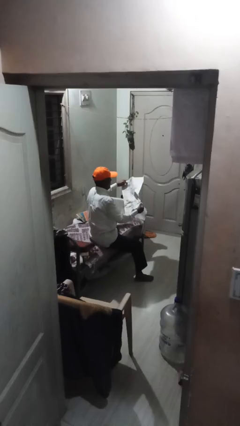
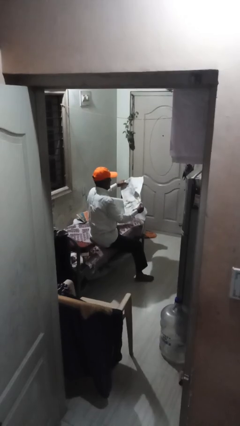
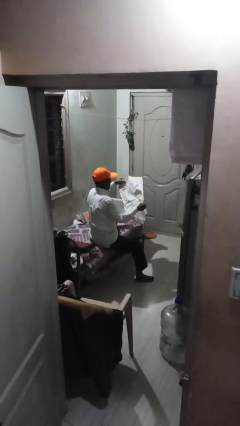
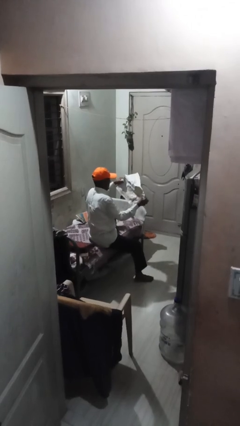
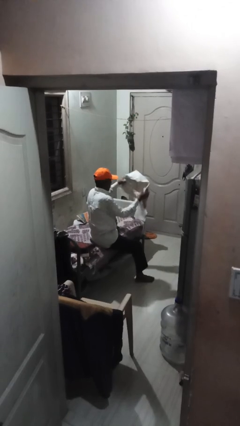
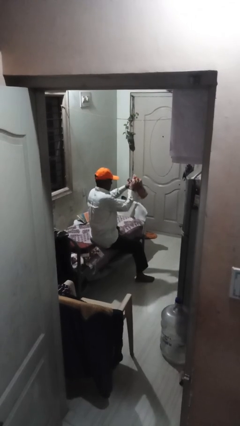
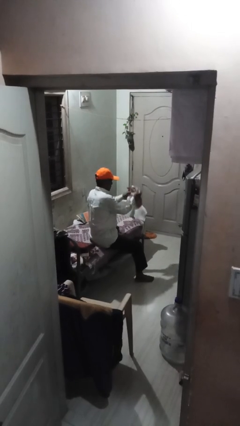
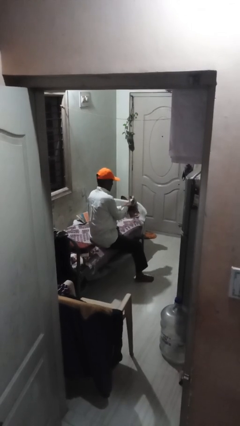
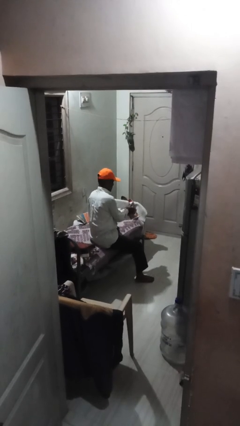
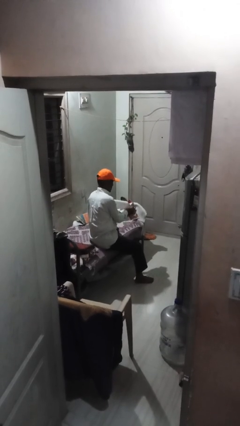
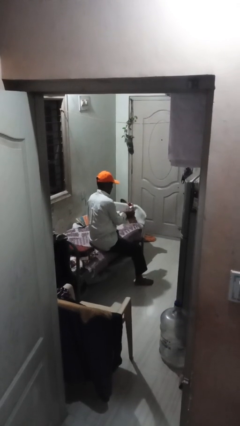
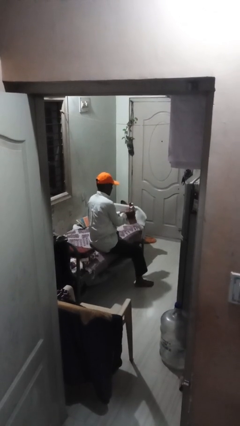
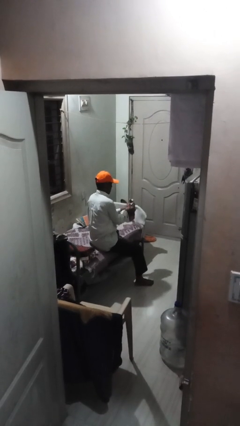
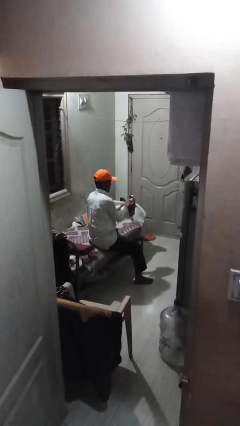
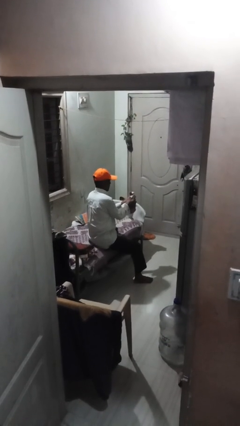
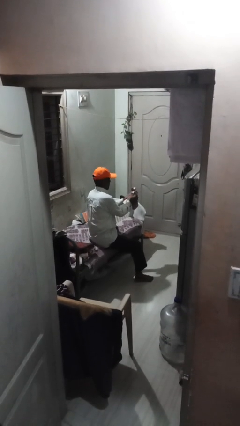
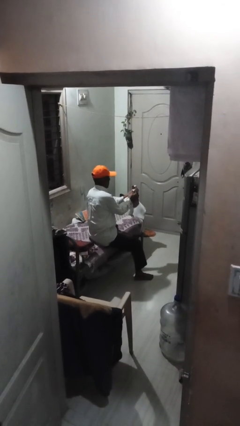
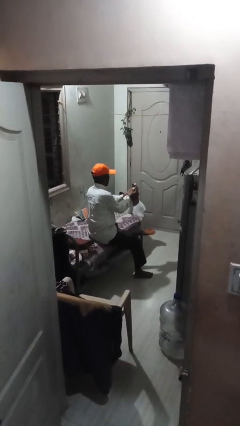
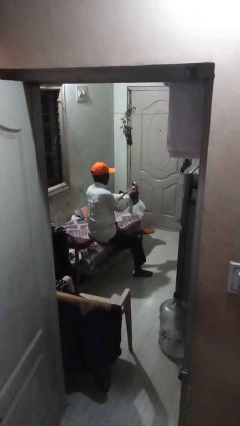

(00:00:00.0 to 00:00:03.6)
person crumples paper

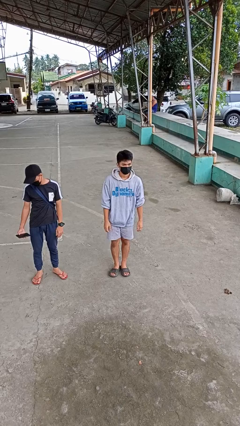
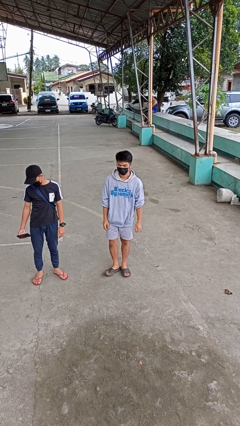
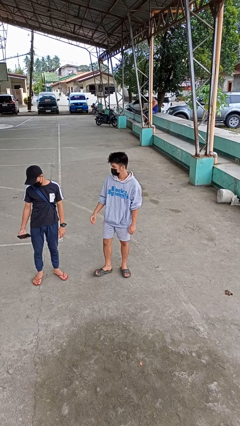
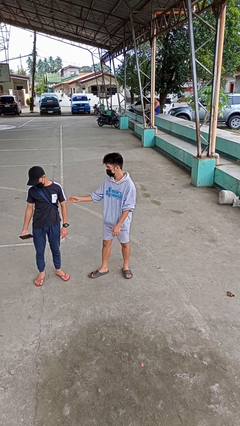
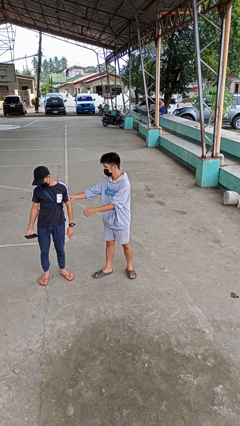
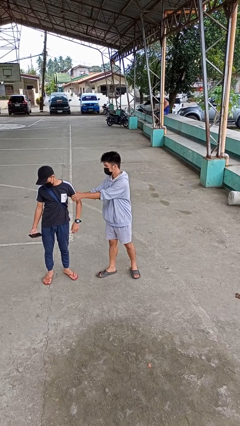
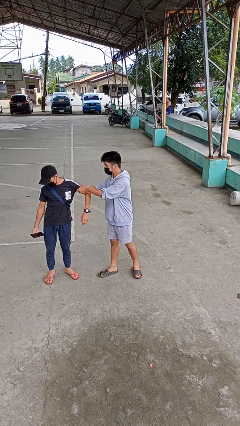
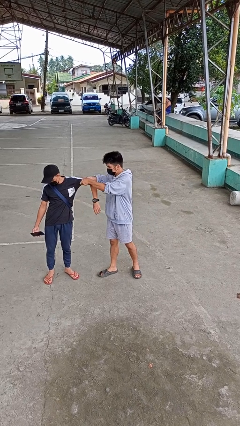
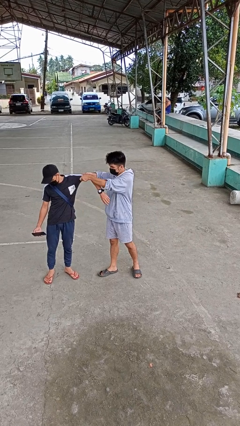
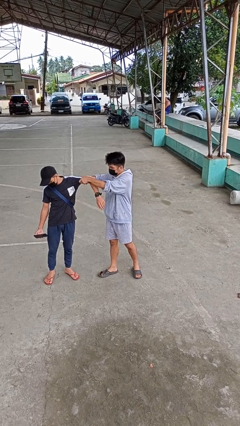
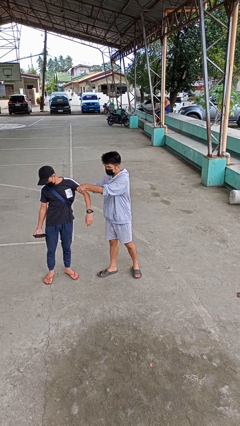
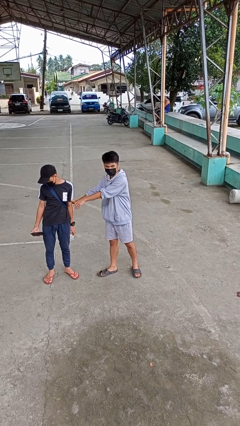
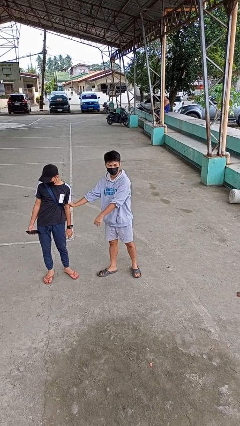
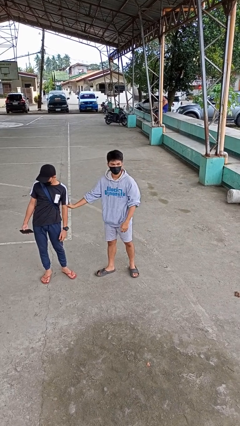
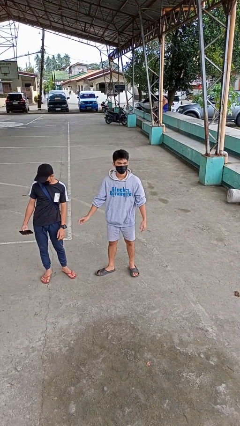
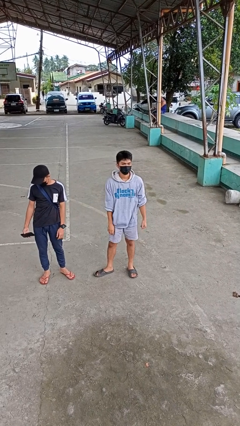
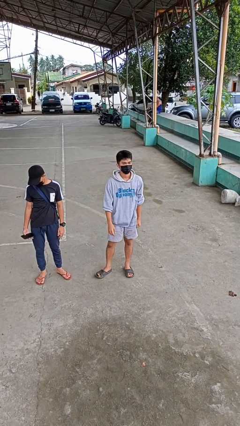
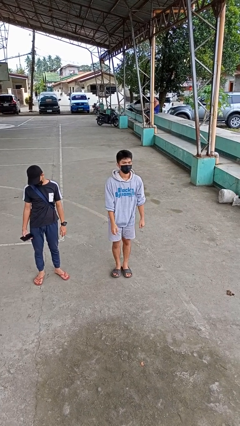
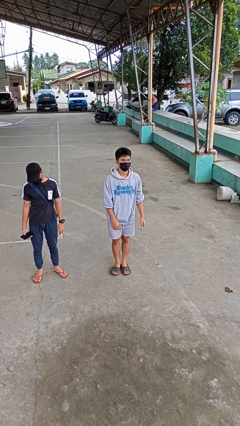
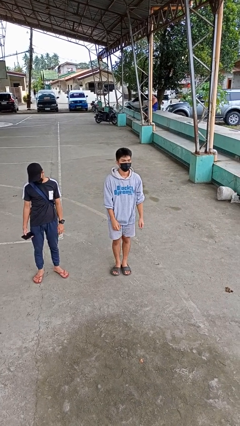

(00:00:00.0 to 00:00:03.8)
person grabs person by bicep

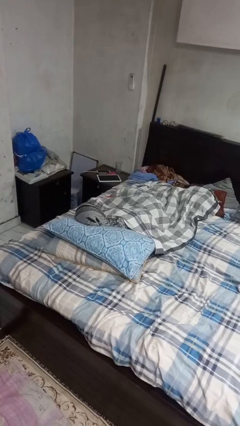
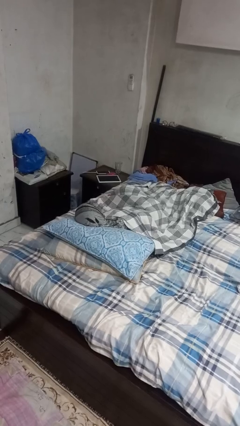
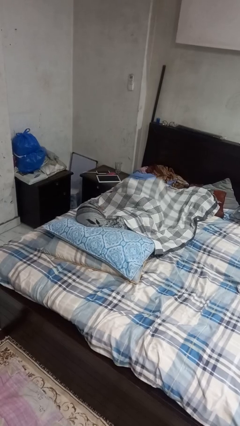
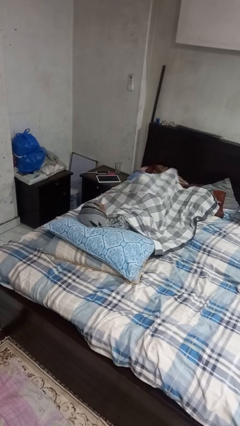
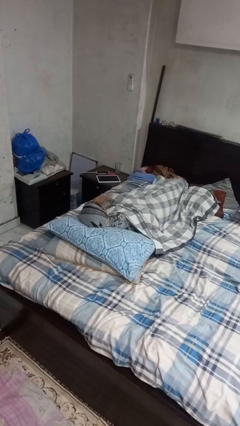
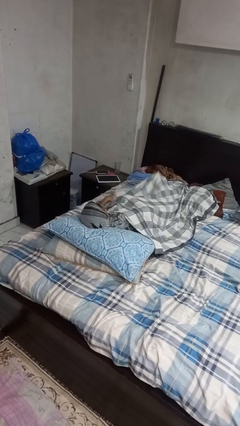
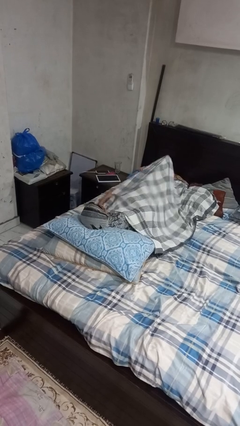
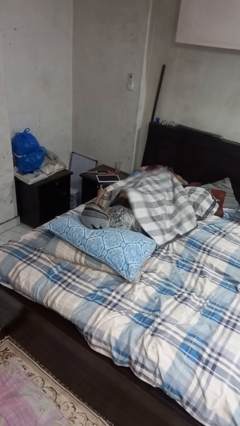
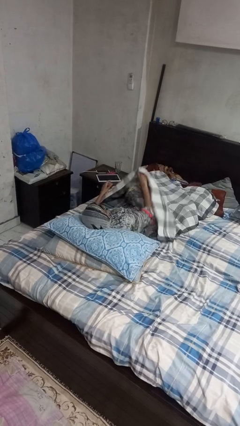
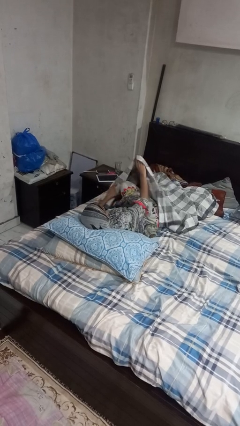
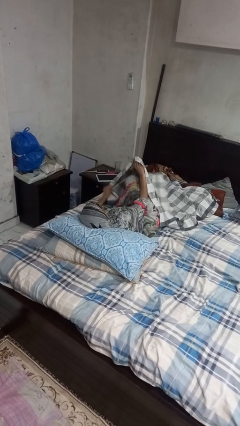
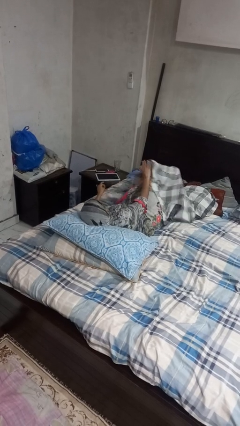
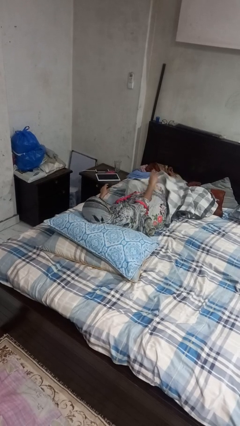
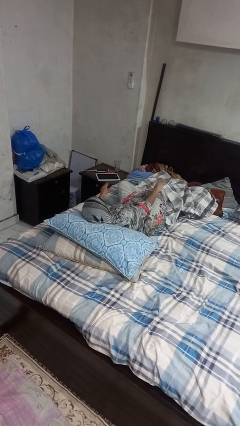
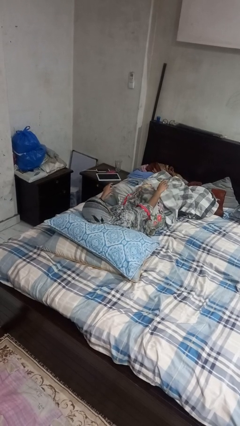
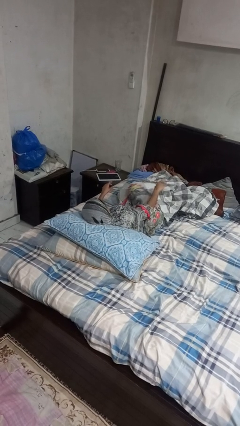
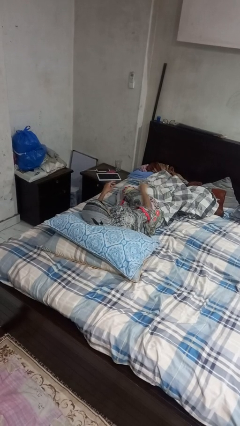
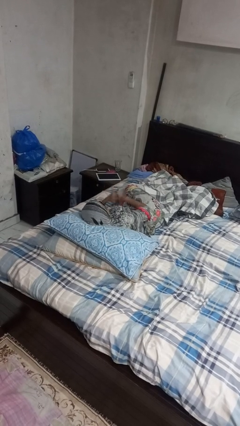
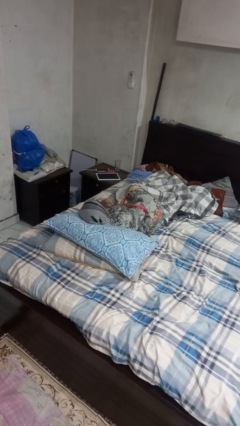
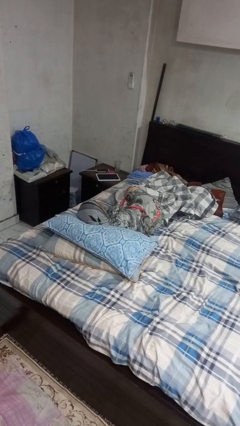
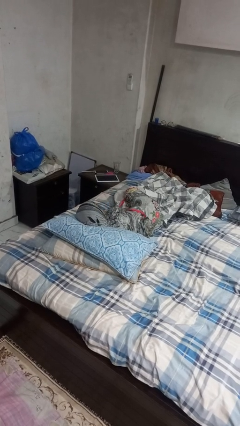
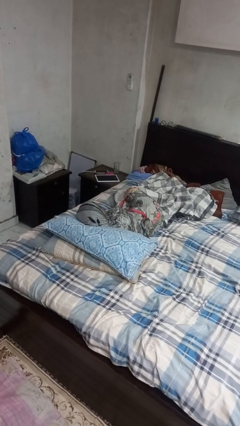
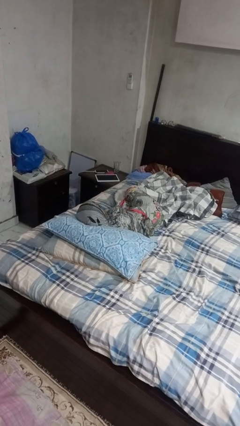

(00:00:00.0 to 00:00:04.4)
person uncovers with bedsheets

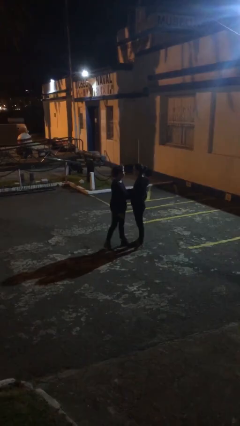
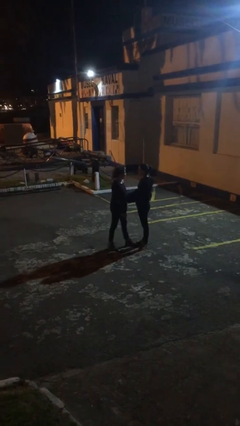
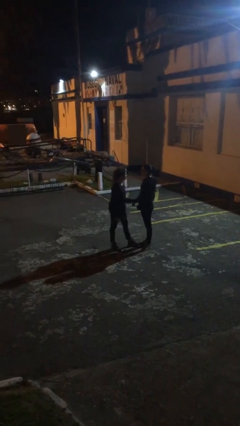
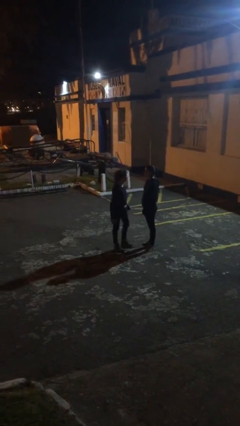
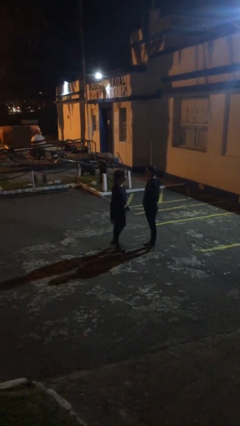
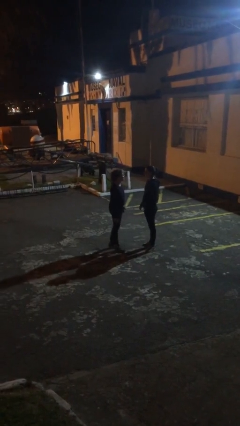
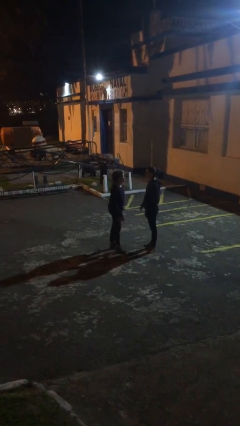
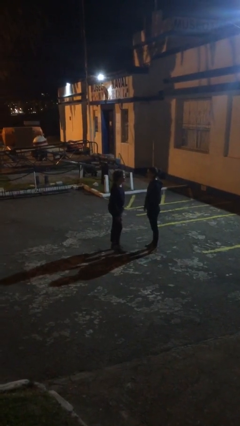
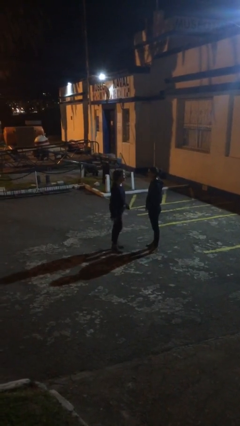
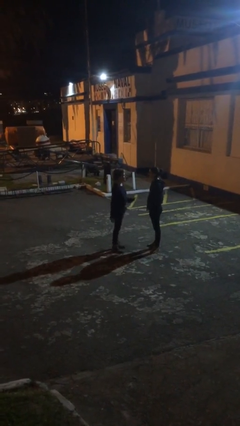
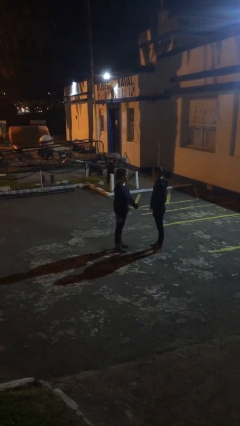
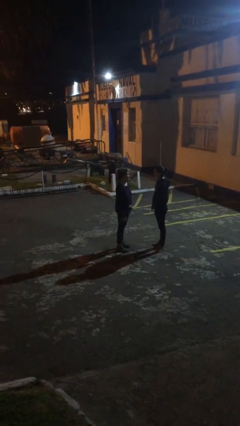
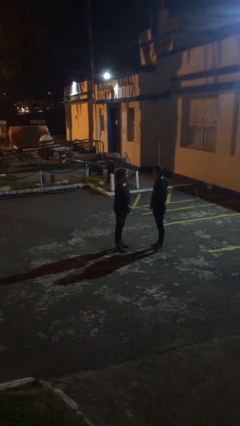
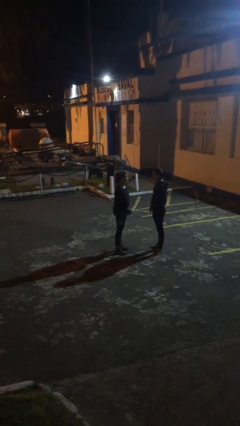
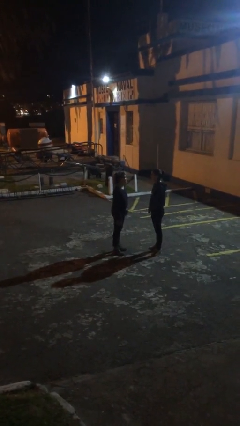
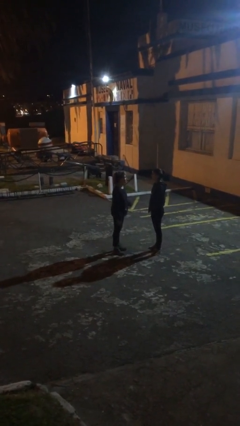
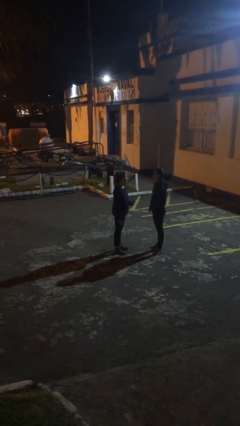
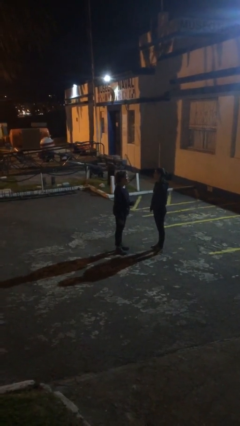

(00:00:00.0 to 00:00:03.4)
person talks to person

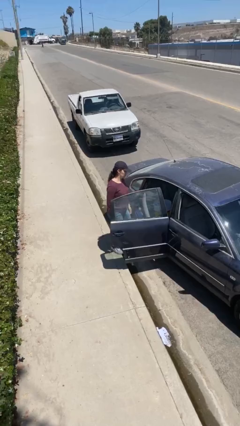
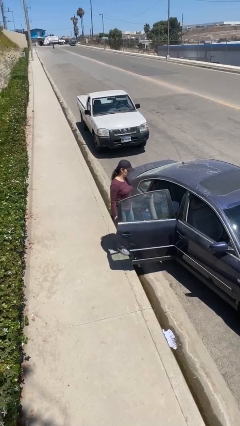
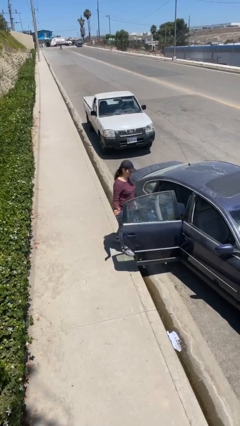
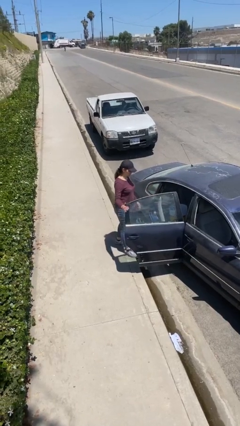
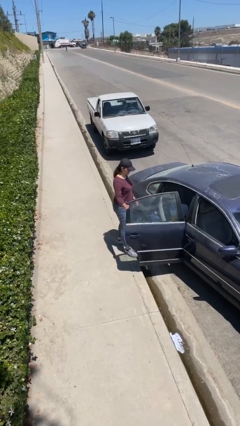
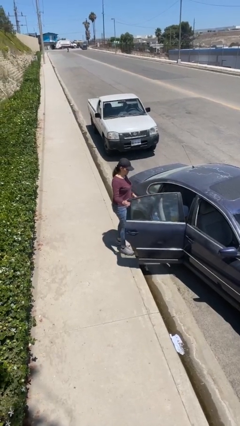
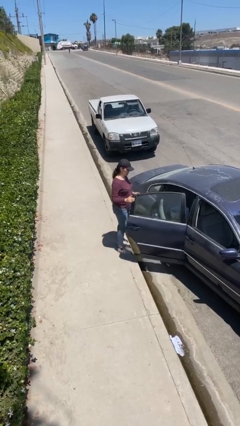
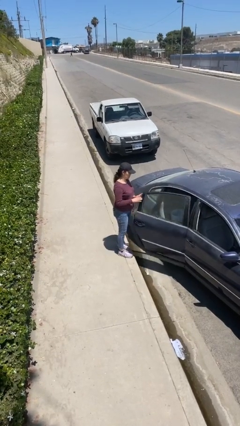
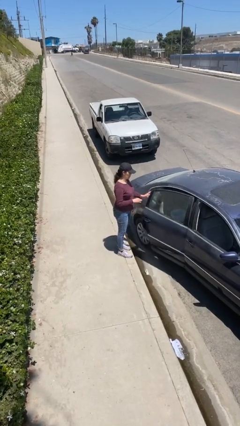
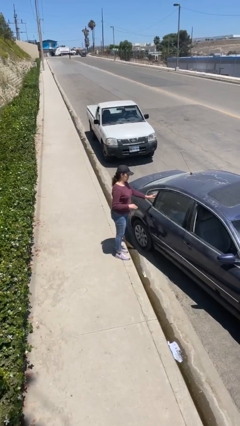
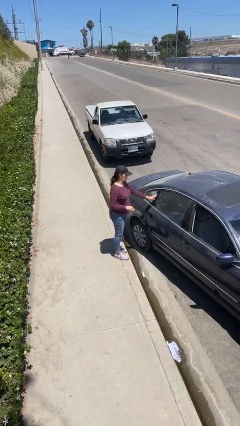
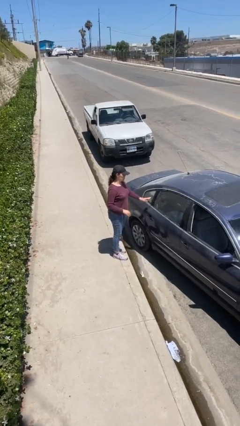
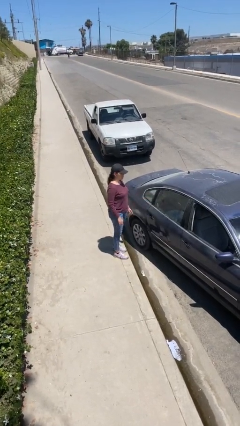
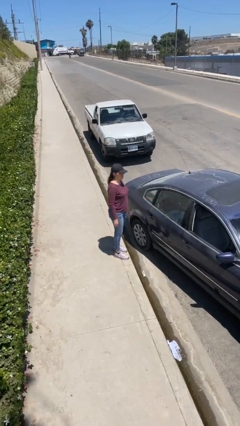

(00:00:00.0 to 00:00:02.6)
person closes car door
